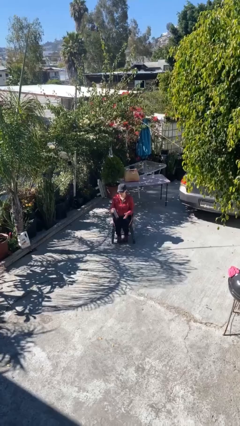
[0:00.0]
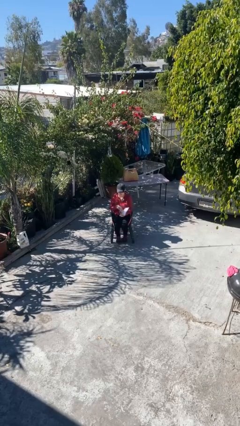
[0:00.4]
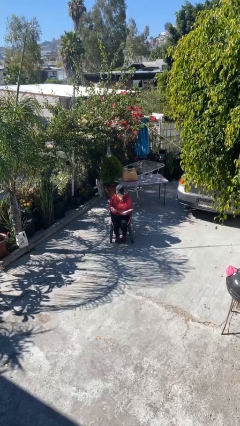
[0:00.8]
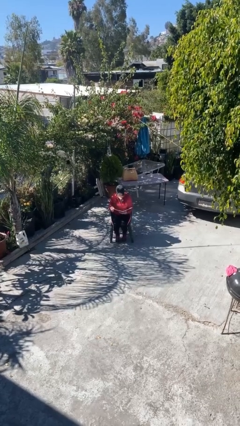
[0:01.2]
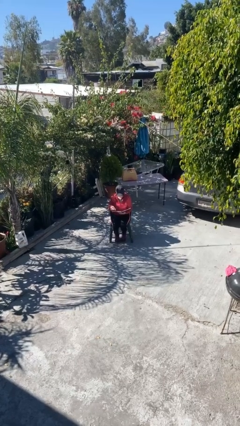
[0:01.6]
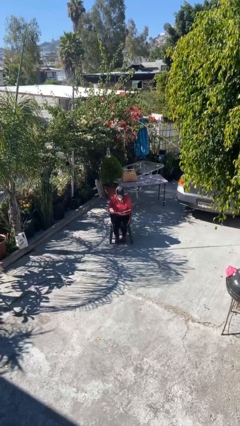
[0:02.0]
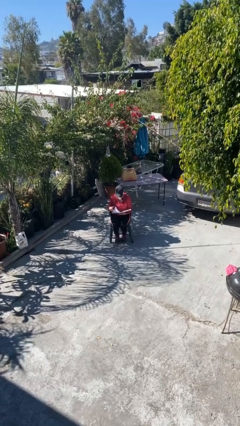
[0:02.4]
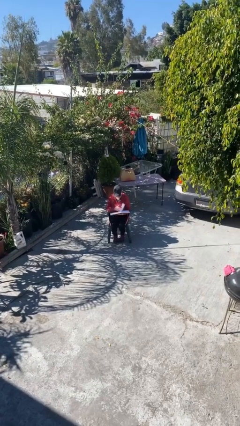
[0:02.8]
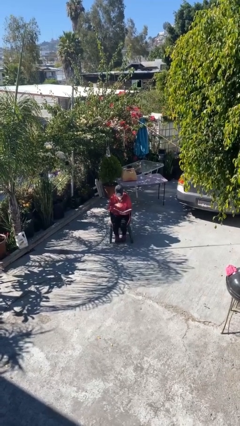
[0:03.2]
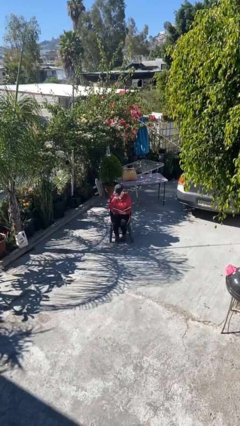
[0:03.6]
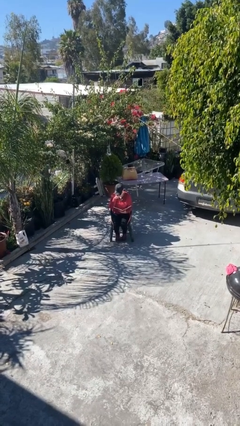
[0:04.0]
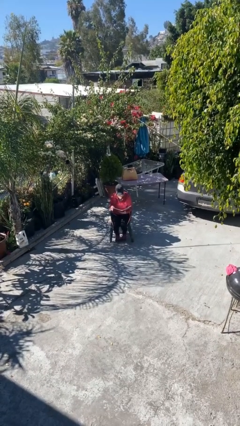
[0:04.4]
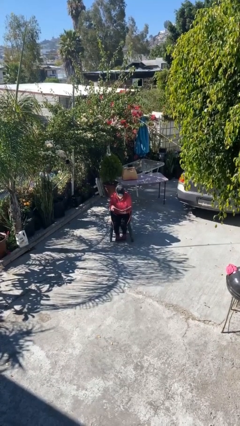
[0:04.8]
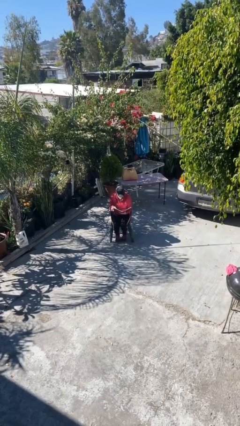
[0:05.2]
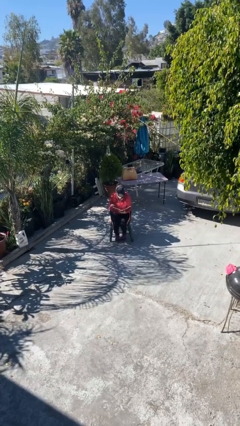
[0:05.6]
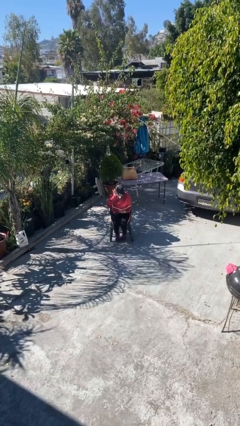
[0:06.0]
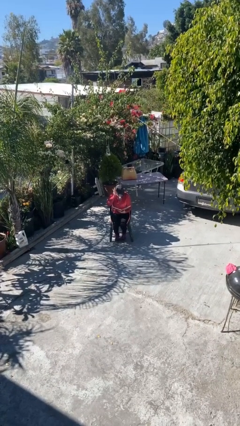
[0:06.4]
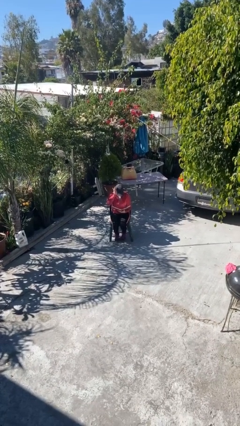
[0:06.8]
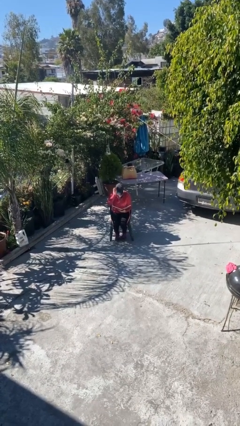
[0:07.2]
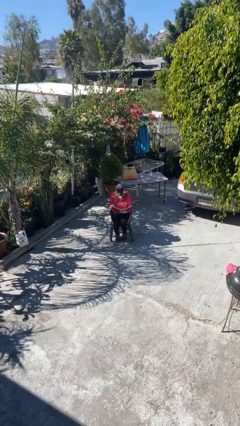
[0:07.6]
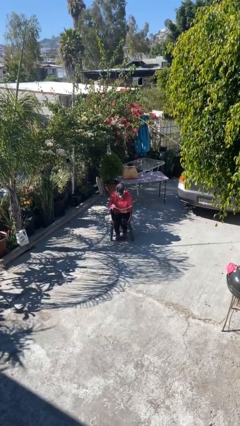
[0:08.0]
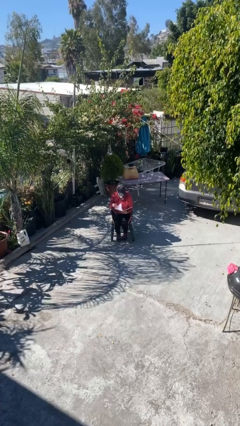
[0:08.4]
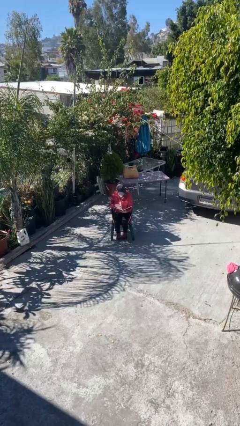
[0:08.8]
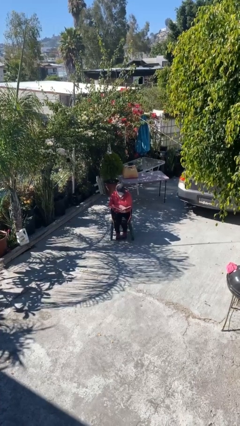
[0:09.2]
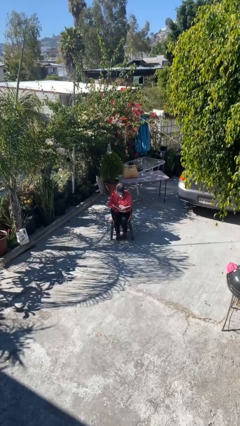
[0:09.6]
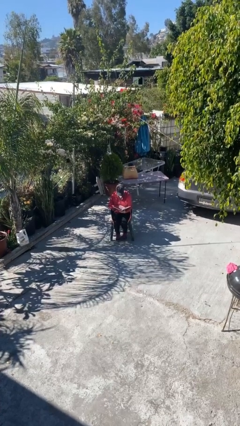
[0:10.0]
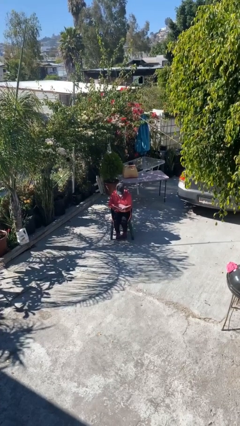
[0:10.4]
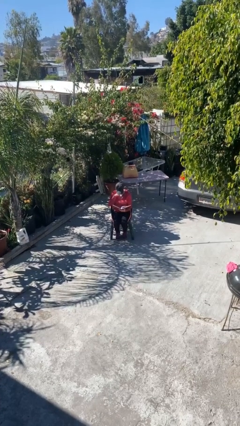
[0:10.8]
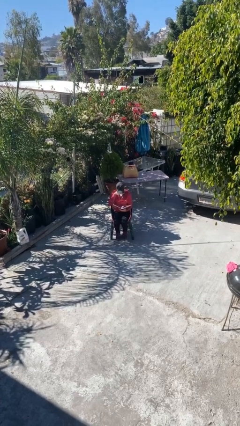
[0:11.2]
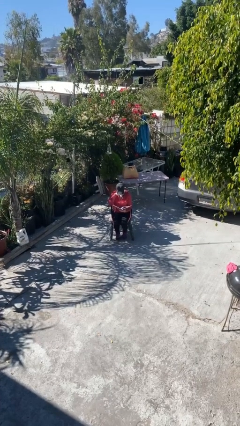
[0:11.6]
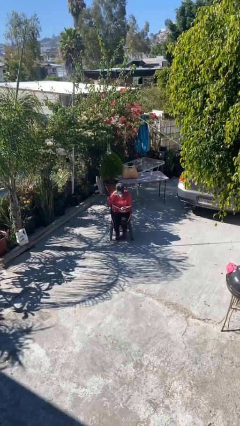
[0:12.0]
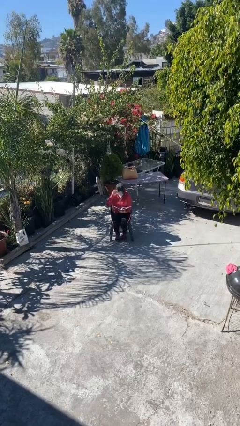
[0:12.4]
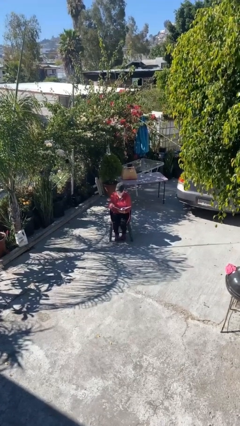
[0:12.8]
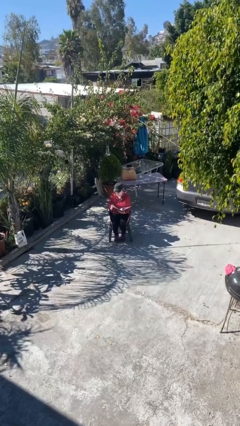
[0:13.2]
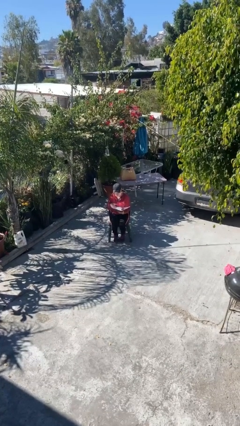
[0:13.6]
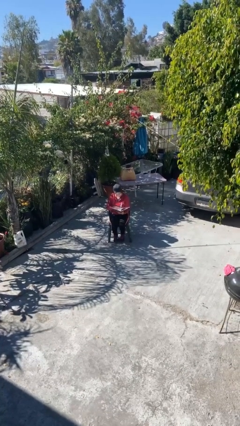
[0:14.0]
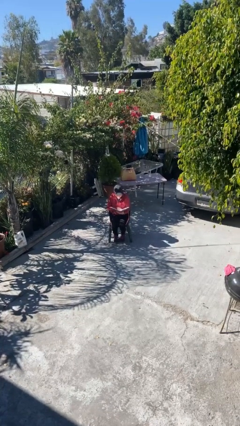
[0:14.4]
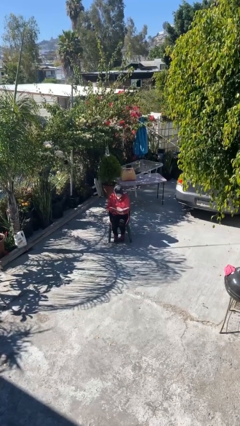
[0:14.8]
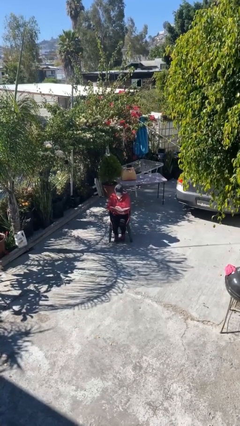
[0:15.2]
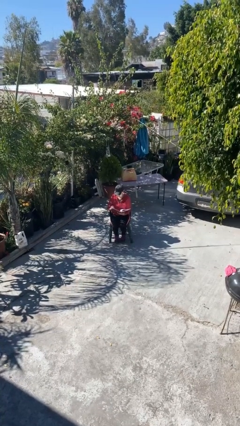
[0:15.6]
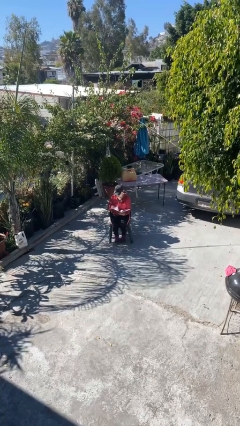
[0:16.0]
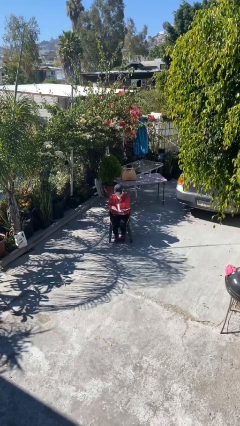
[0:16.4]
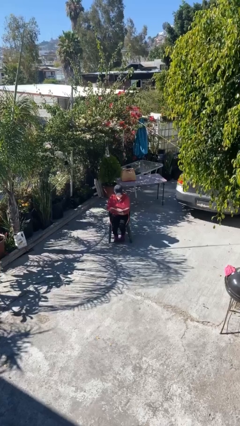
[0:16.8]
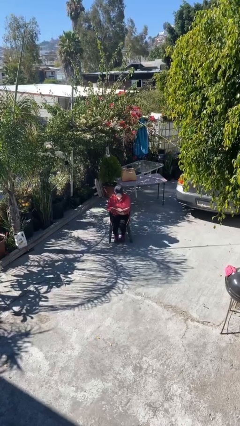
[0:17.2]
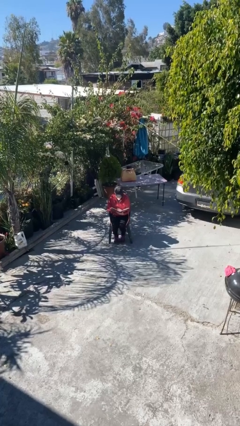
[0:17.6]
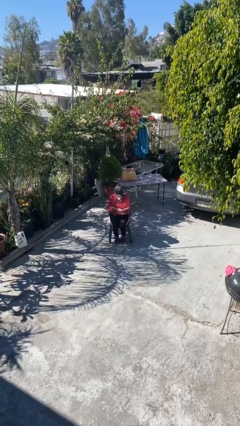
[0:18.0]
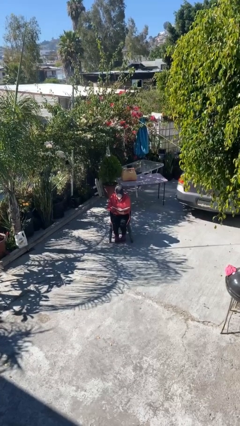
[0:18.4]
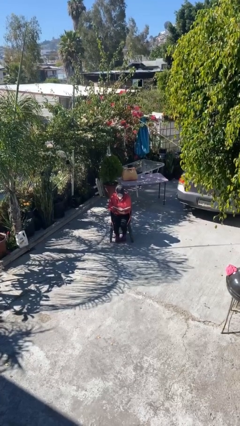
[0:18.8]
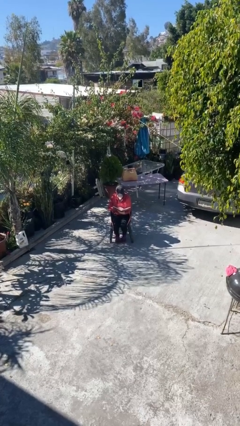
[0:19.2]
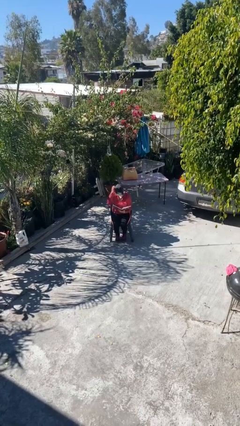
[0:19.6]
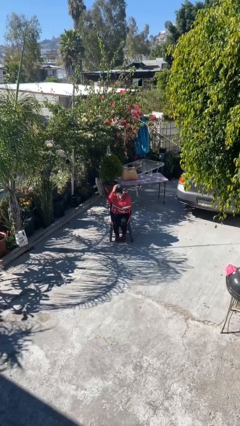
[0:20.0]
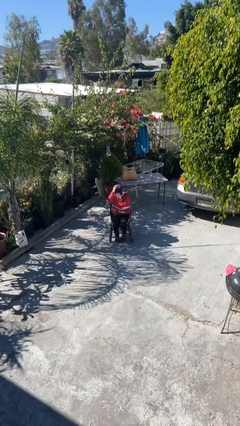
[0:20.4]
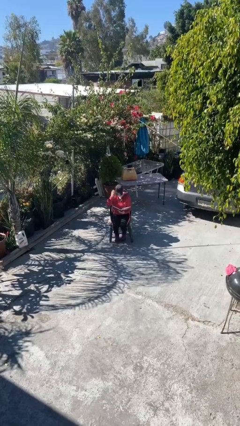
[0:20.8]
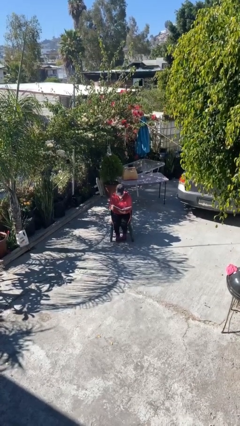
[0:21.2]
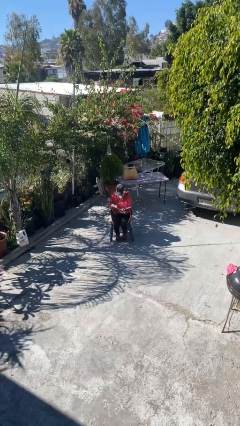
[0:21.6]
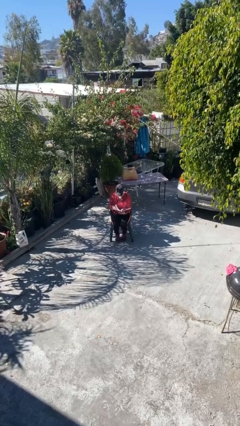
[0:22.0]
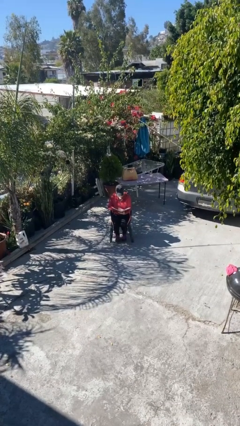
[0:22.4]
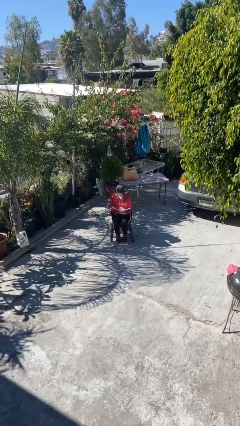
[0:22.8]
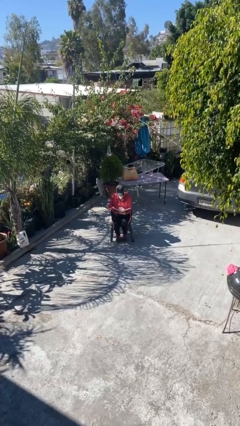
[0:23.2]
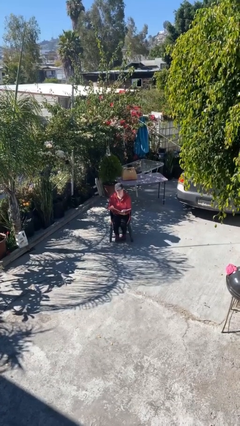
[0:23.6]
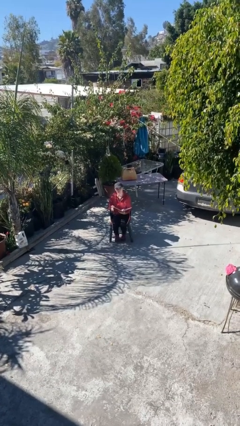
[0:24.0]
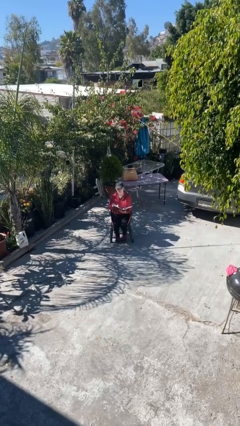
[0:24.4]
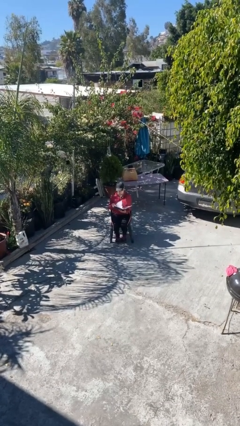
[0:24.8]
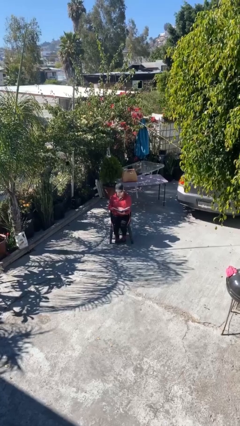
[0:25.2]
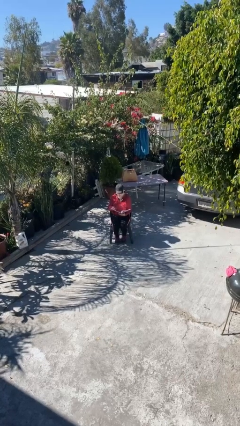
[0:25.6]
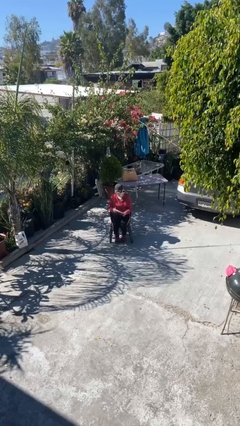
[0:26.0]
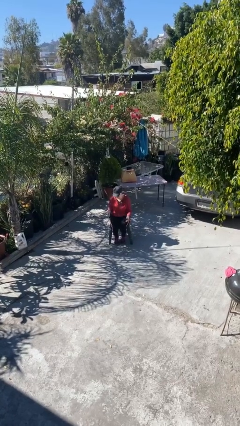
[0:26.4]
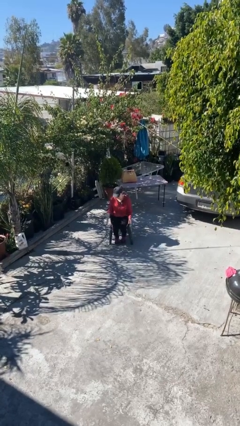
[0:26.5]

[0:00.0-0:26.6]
person reads document

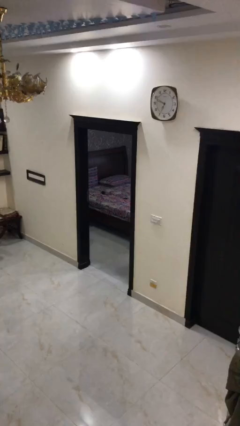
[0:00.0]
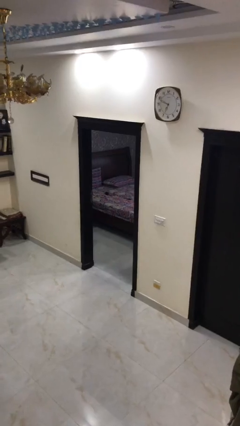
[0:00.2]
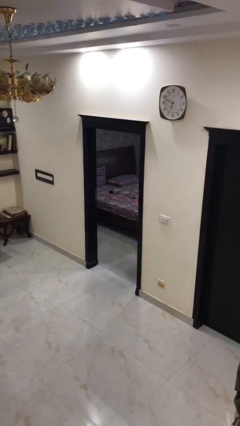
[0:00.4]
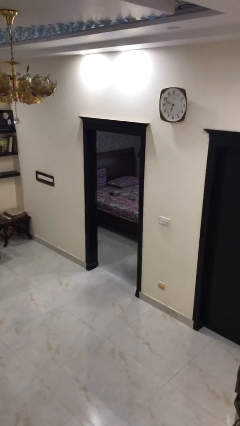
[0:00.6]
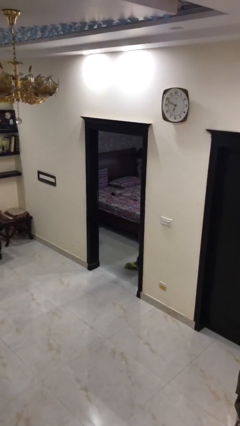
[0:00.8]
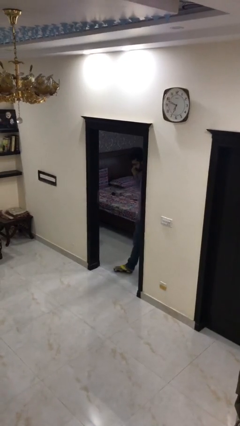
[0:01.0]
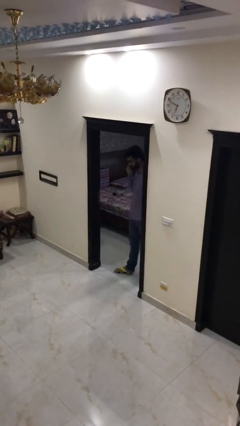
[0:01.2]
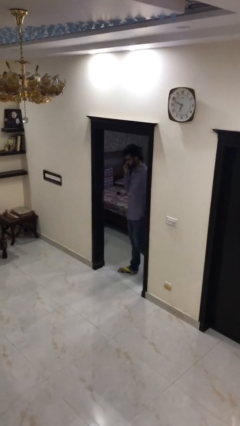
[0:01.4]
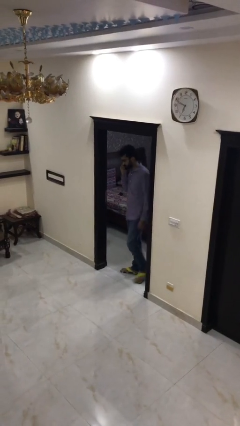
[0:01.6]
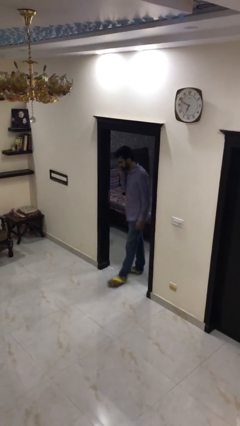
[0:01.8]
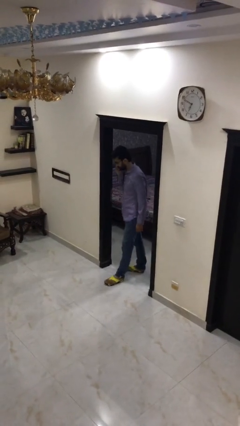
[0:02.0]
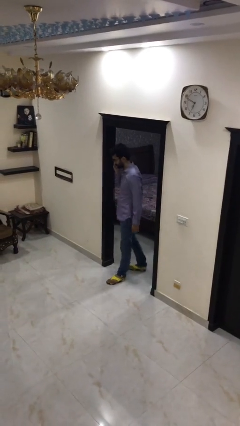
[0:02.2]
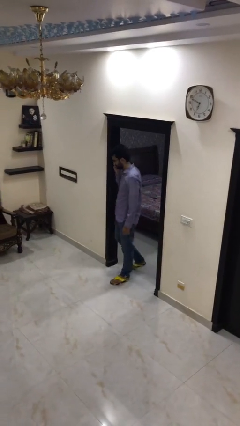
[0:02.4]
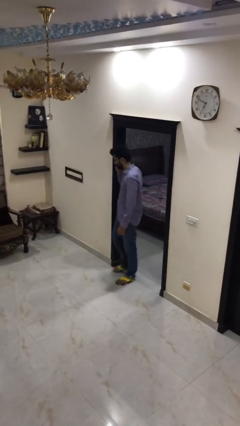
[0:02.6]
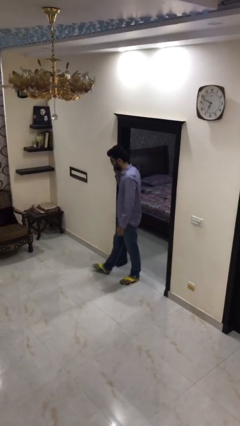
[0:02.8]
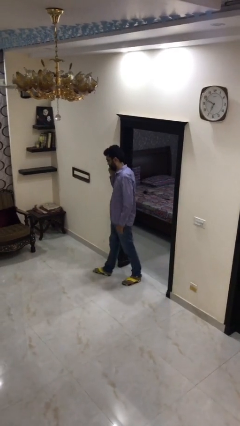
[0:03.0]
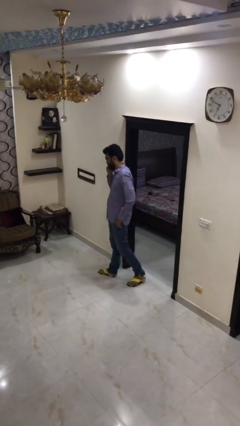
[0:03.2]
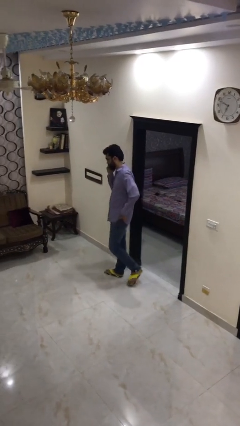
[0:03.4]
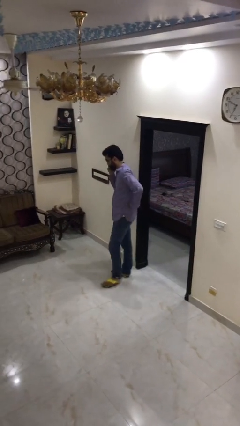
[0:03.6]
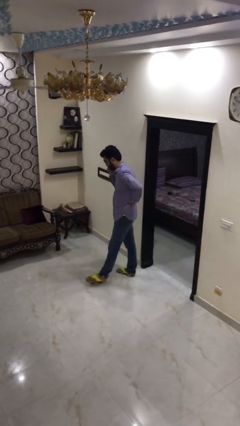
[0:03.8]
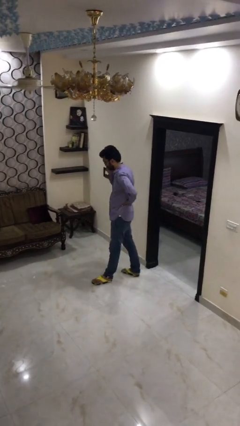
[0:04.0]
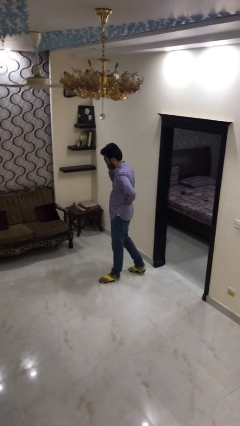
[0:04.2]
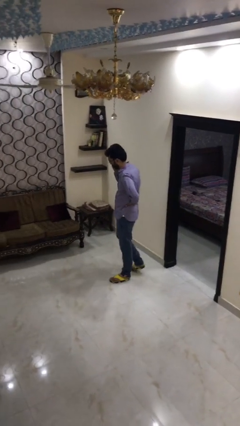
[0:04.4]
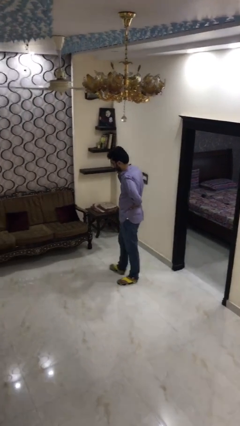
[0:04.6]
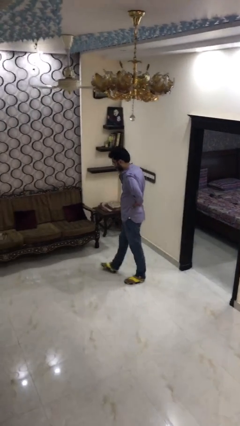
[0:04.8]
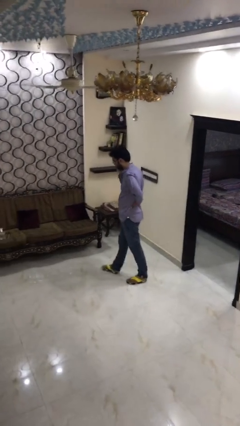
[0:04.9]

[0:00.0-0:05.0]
person enters scene through structure

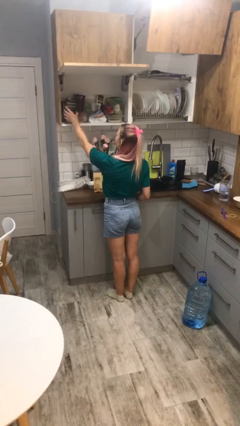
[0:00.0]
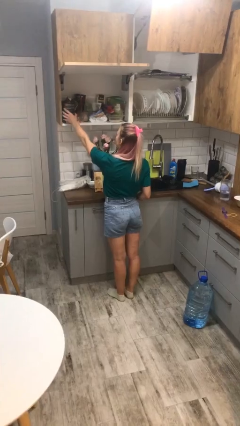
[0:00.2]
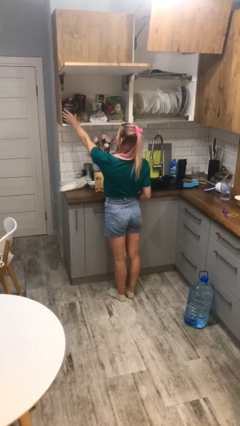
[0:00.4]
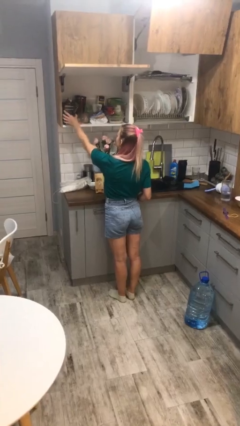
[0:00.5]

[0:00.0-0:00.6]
person puts down object into cabinet
